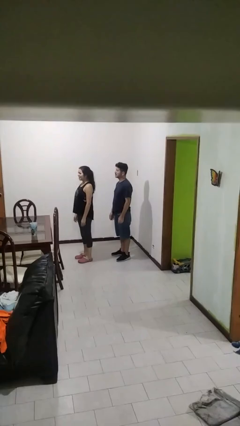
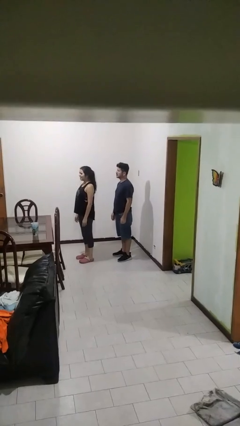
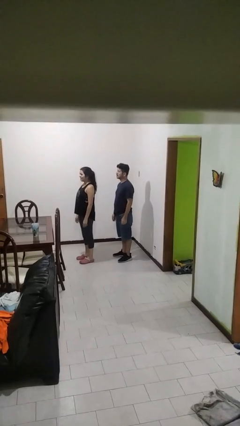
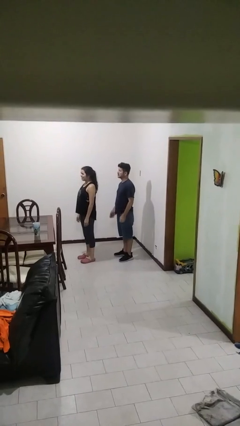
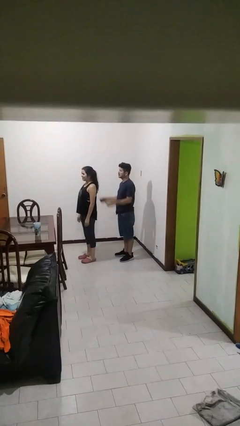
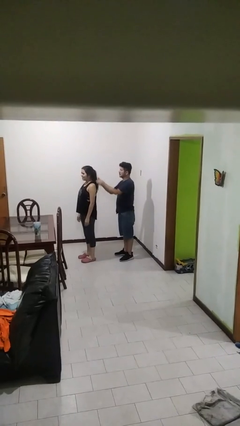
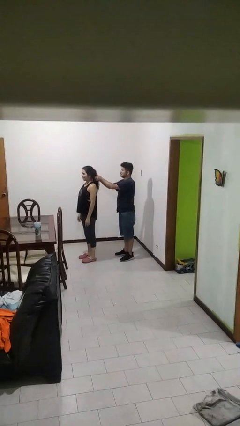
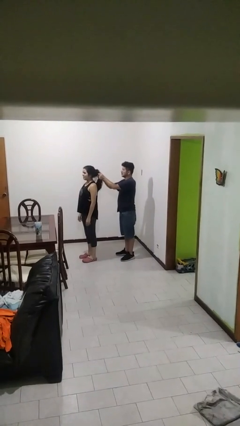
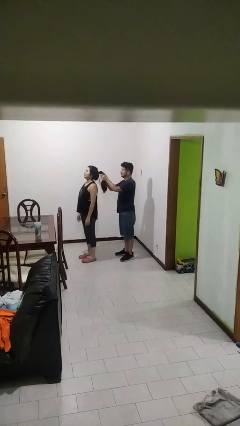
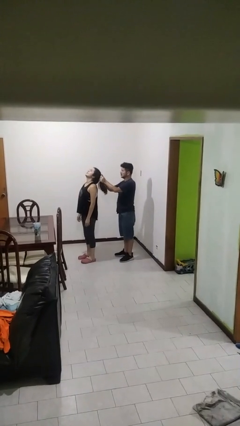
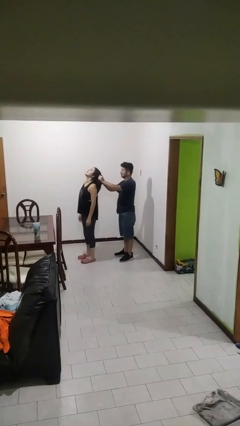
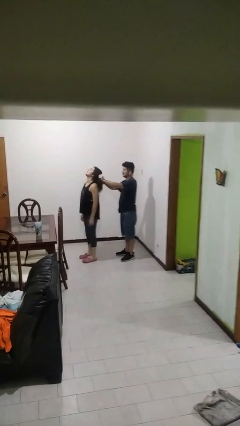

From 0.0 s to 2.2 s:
person grabs person by hair

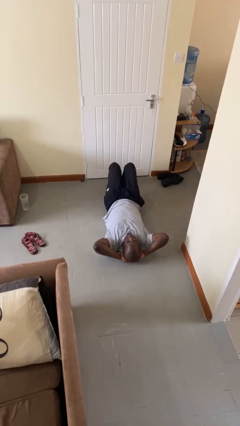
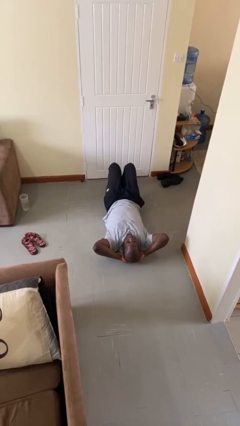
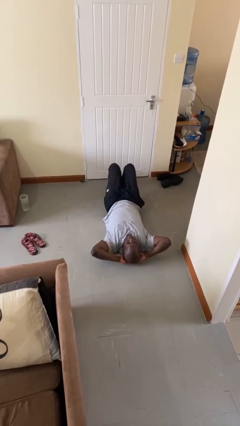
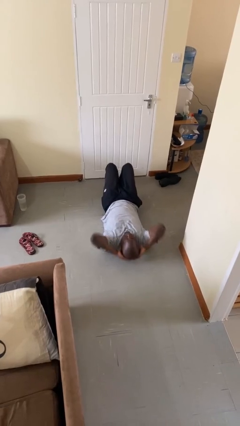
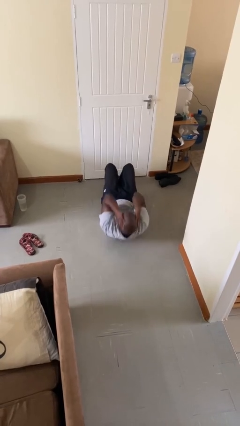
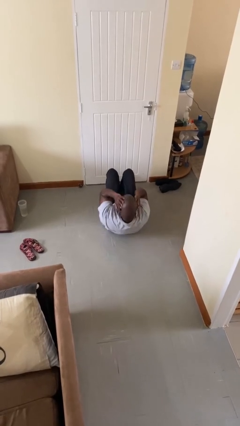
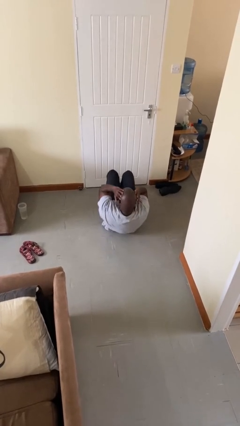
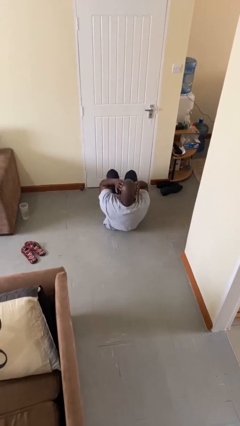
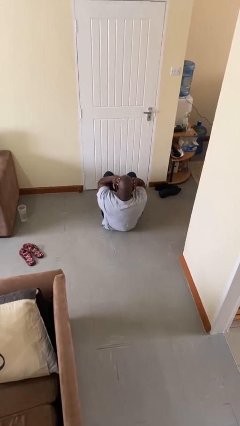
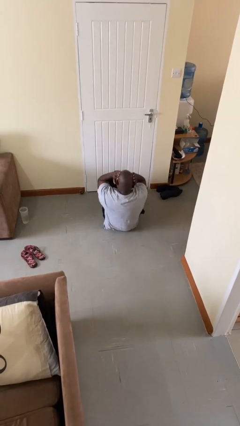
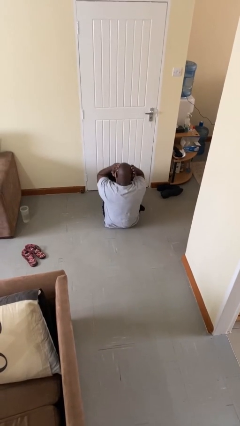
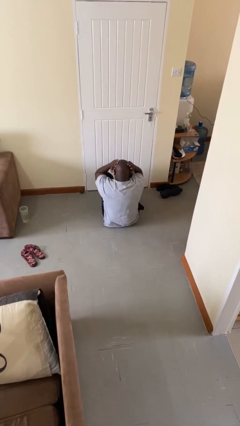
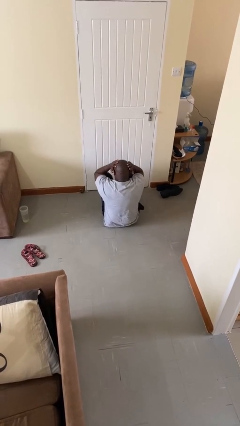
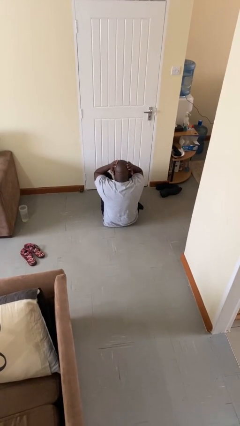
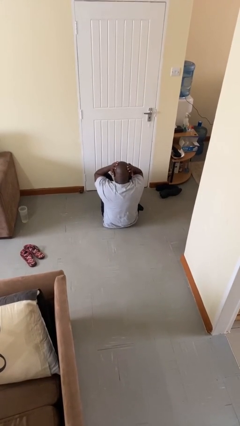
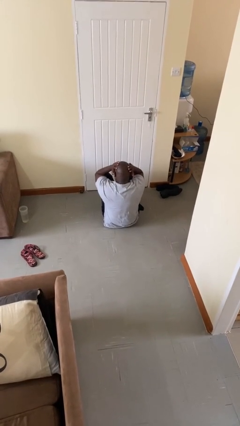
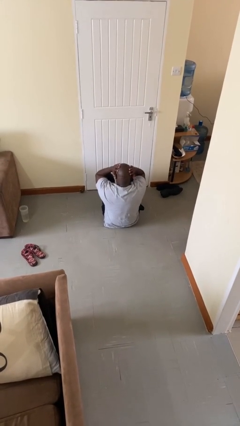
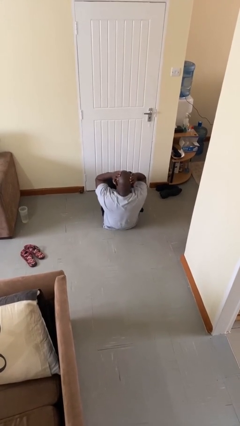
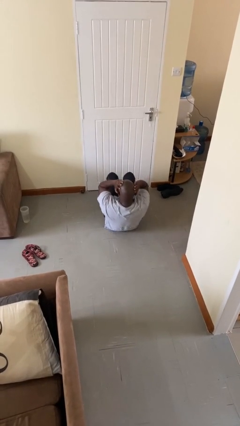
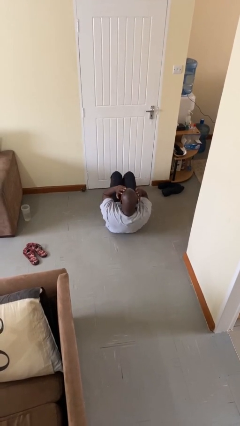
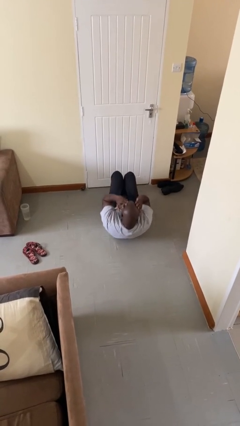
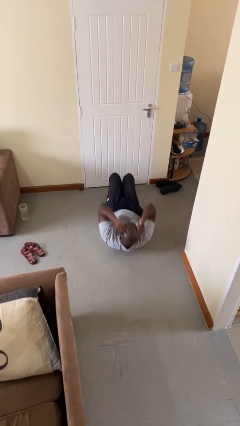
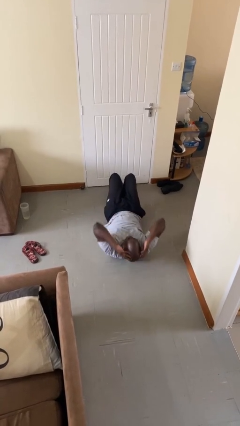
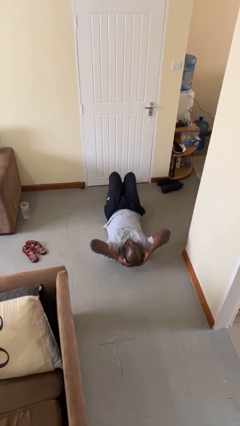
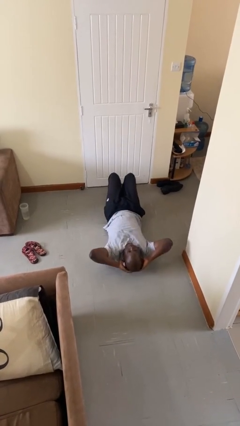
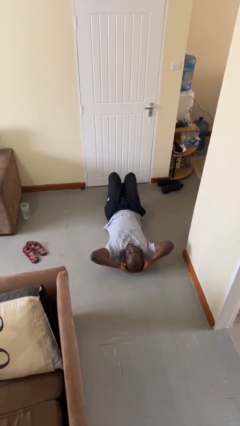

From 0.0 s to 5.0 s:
person exercises with situp

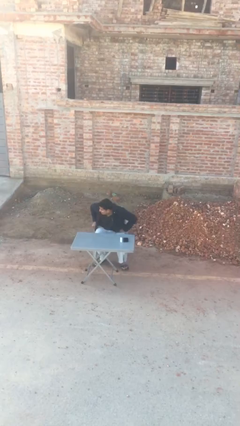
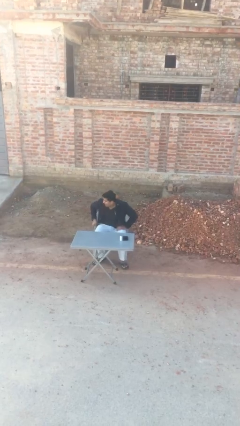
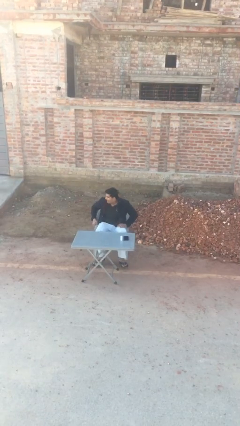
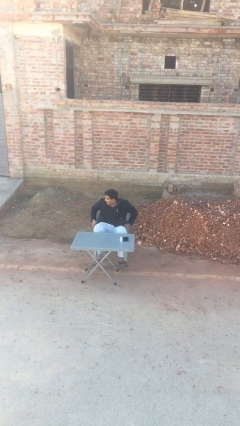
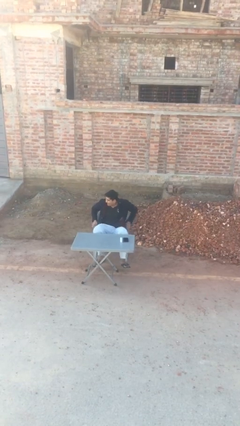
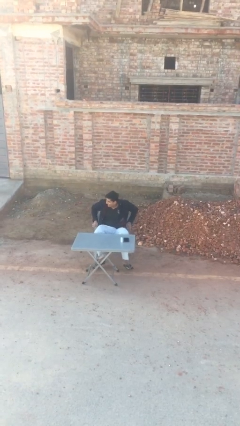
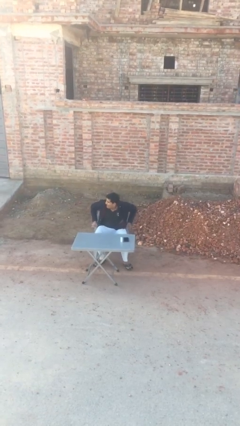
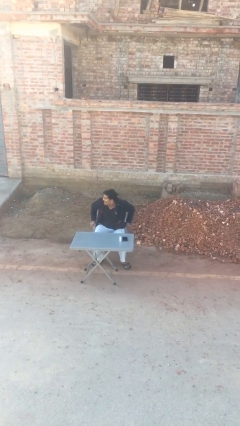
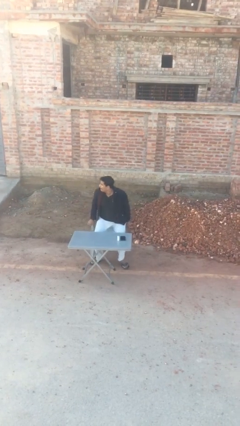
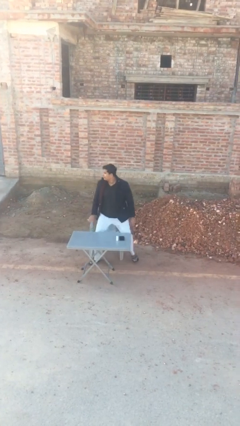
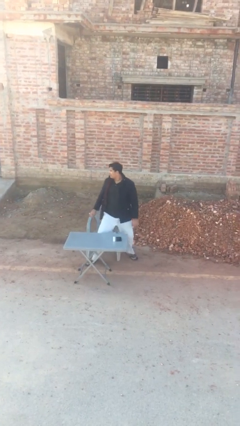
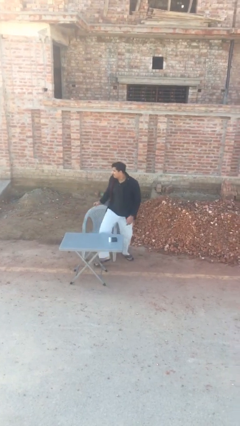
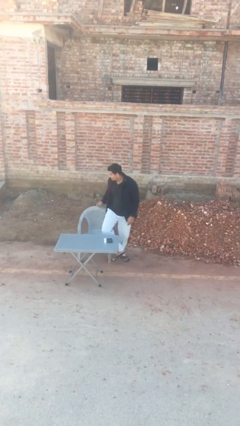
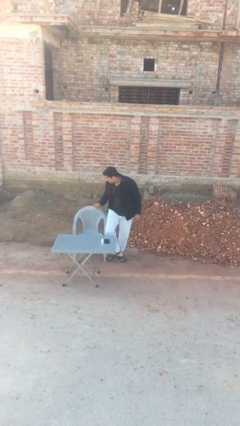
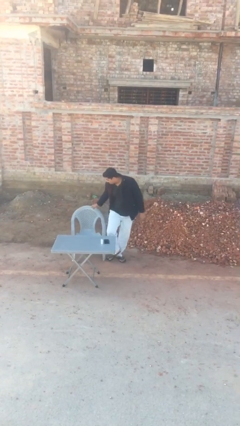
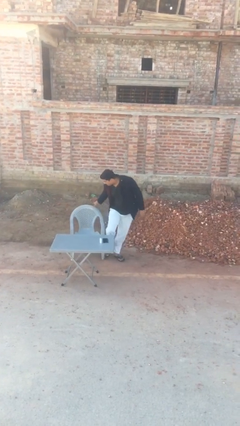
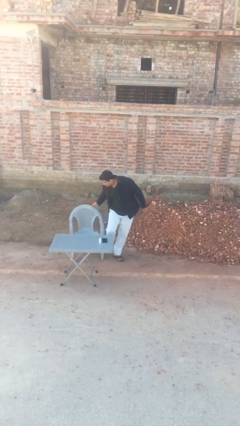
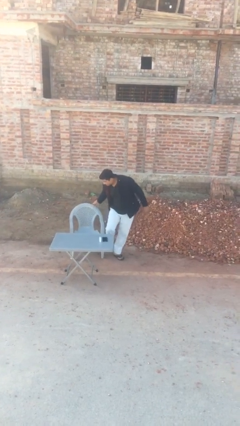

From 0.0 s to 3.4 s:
person stands up

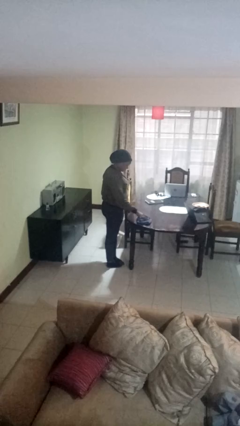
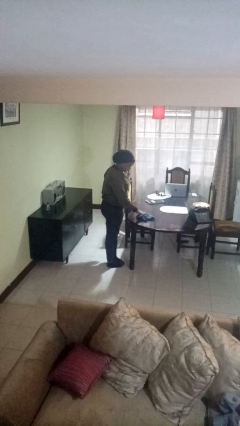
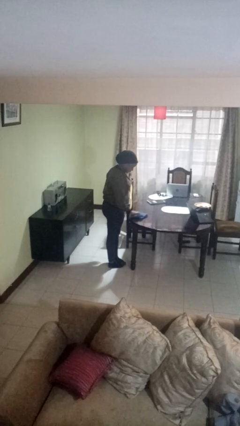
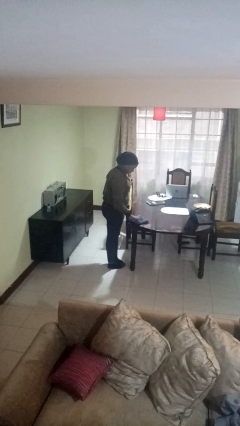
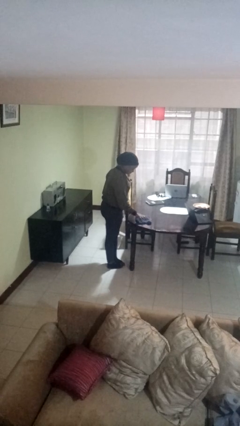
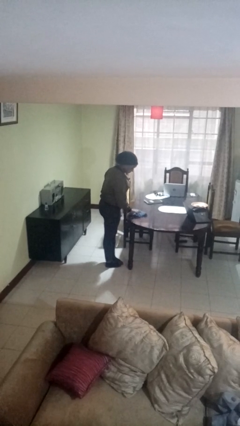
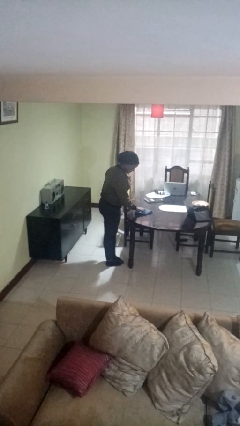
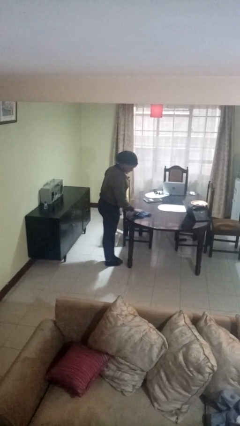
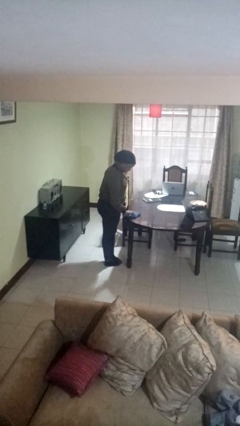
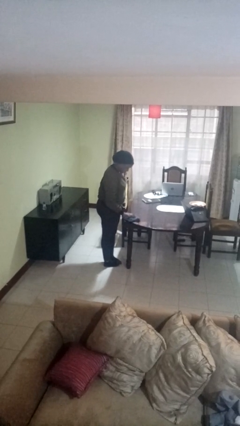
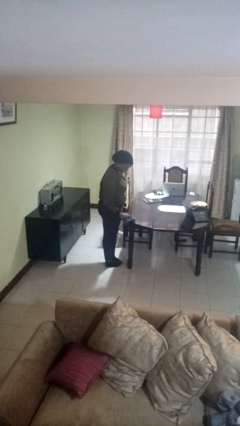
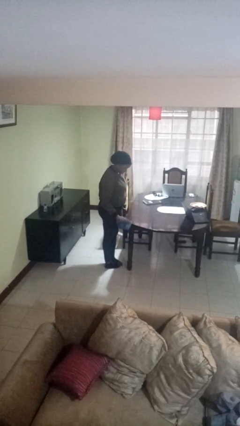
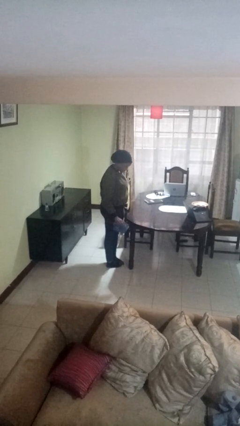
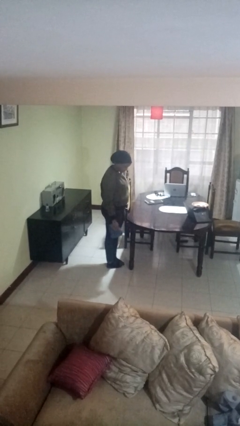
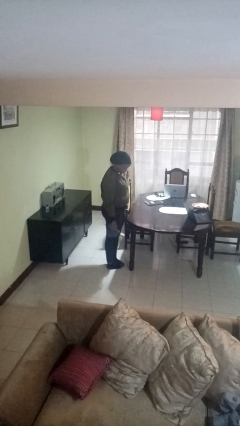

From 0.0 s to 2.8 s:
person cleans table with rag

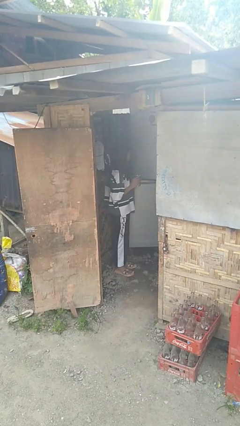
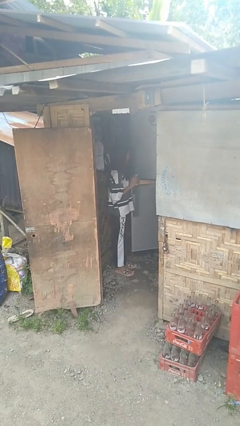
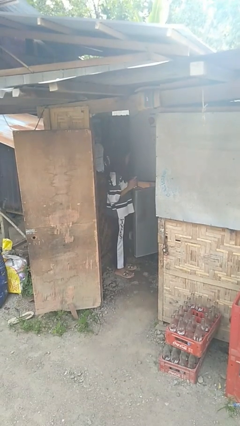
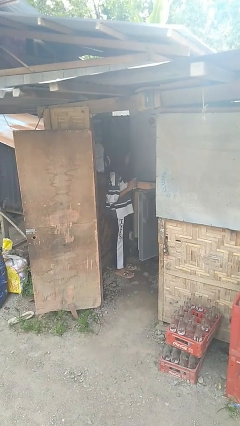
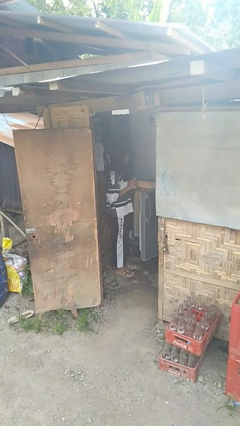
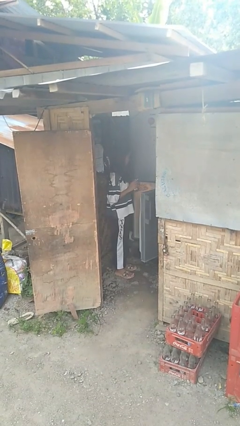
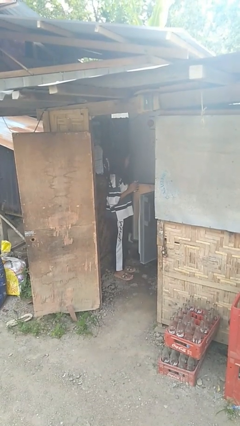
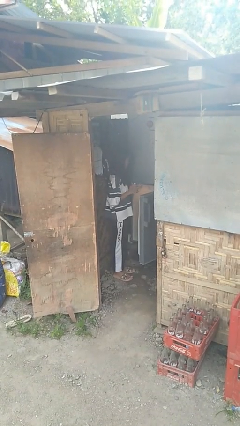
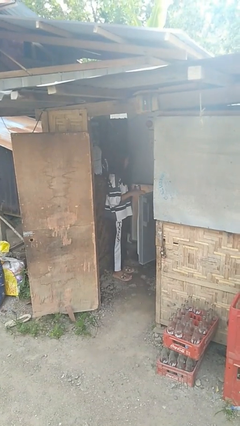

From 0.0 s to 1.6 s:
person opens refrigerator

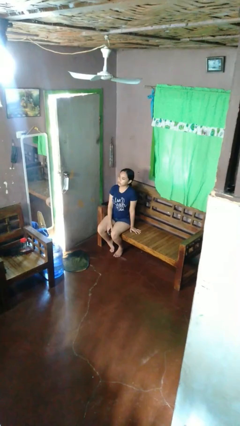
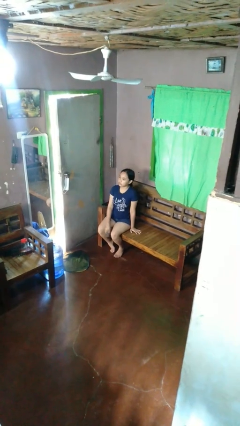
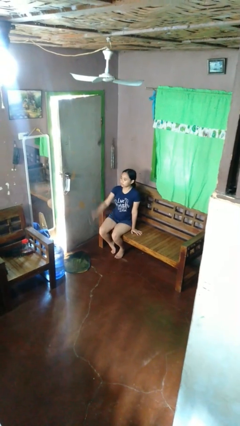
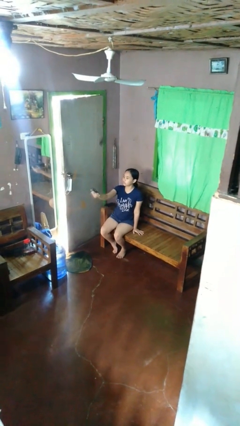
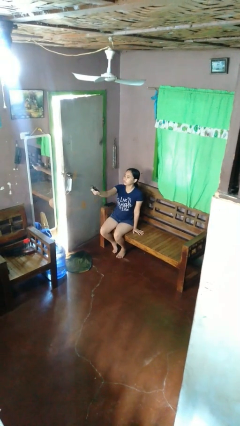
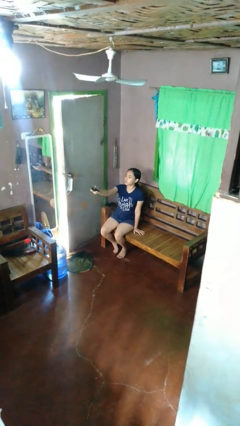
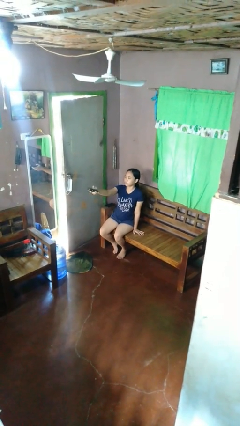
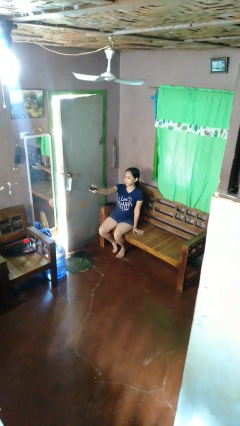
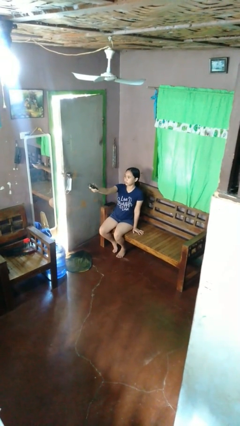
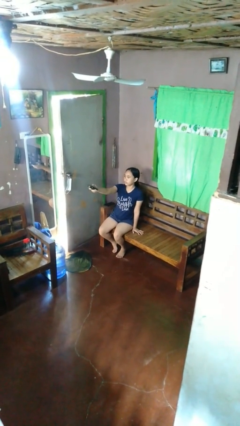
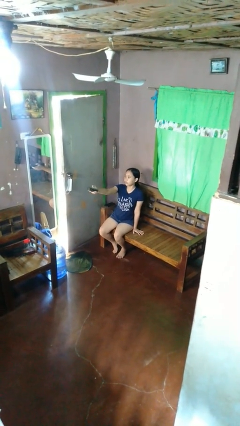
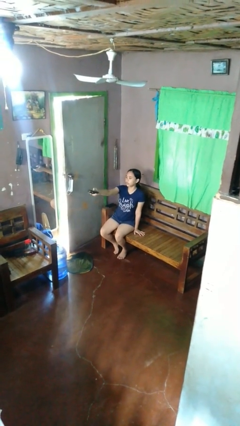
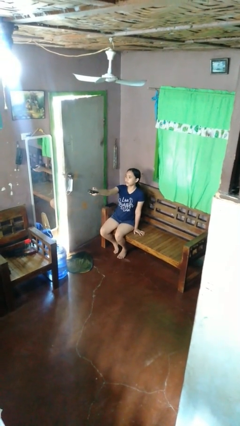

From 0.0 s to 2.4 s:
person uses television remote
